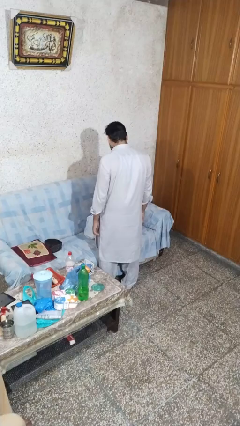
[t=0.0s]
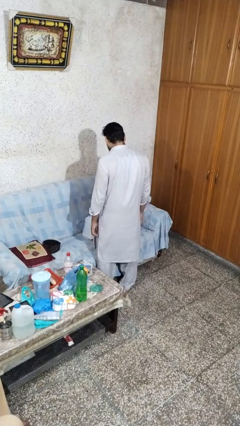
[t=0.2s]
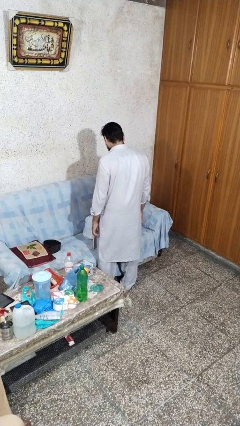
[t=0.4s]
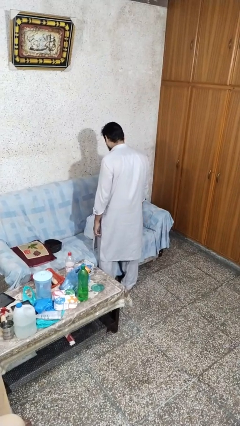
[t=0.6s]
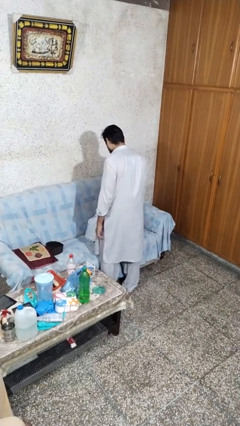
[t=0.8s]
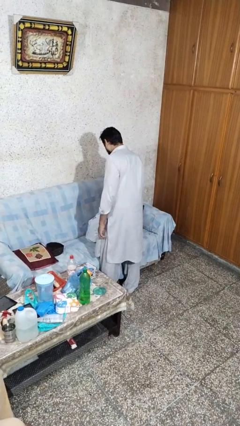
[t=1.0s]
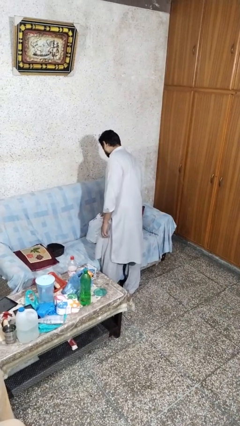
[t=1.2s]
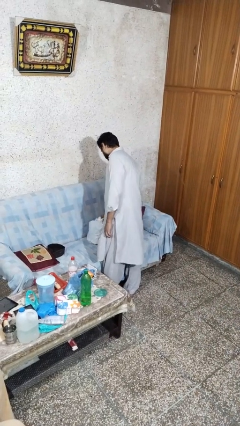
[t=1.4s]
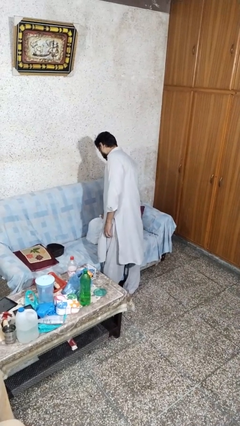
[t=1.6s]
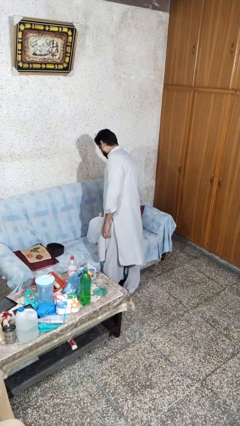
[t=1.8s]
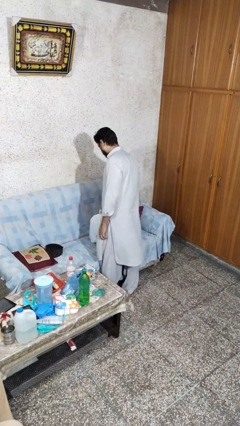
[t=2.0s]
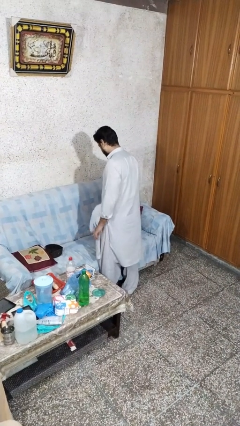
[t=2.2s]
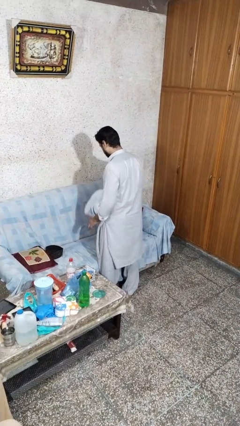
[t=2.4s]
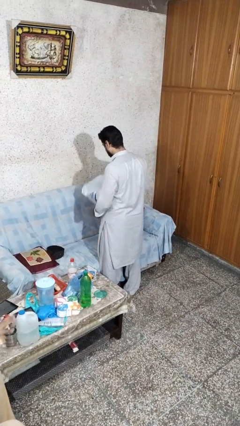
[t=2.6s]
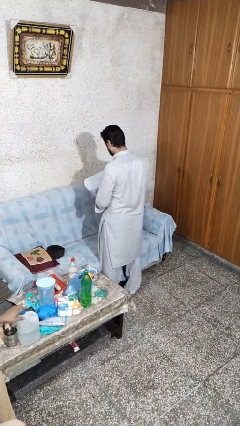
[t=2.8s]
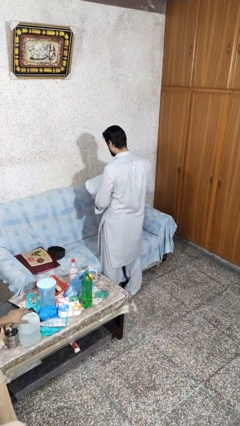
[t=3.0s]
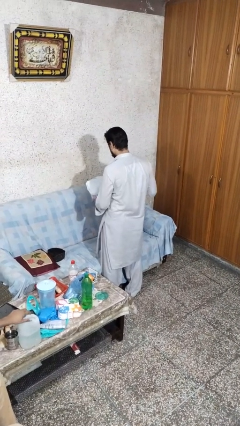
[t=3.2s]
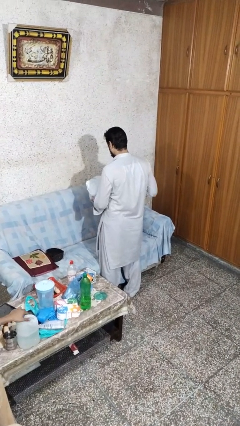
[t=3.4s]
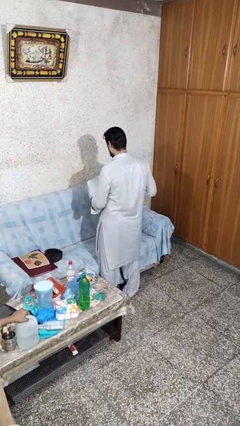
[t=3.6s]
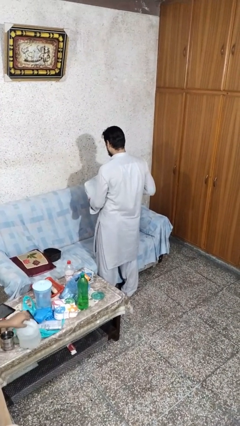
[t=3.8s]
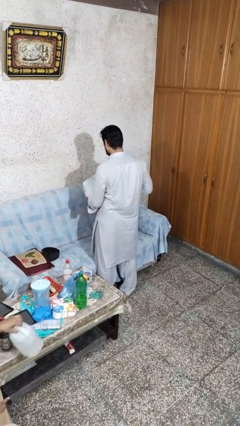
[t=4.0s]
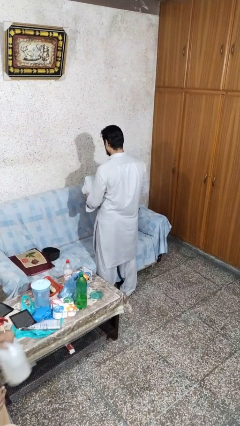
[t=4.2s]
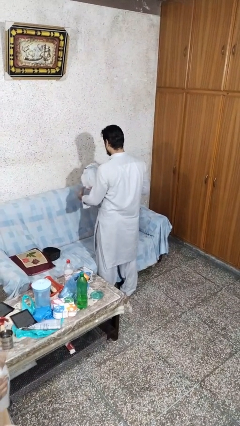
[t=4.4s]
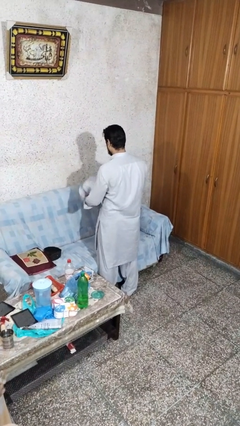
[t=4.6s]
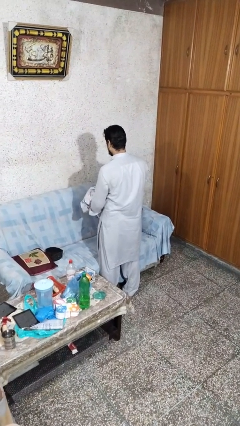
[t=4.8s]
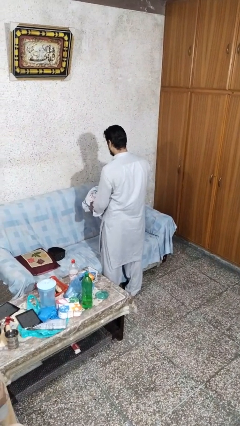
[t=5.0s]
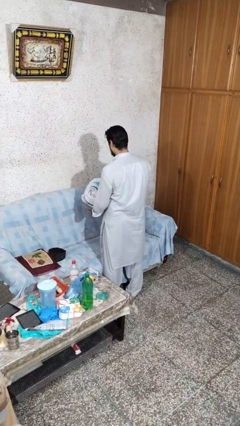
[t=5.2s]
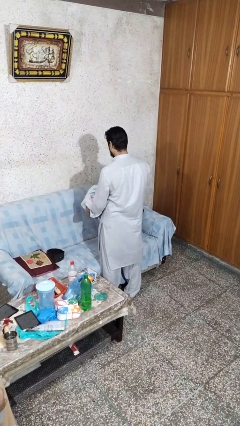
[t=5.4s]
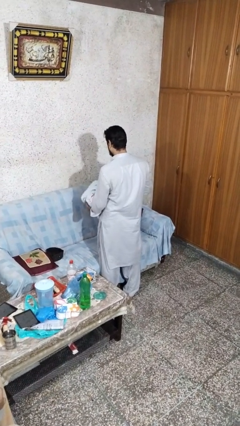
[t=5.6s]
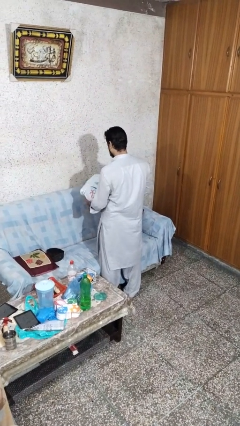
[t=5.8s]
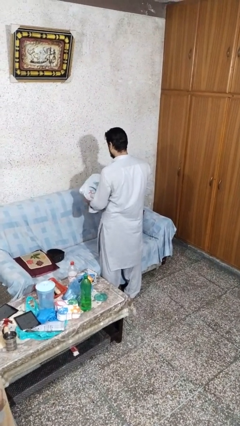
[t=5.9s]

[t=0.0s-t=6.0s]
person picks up object from couch

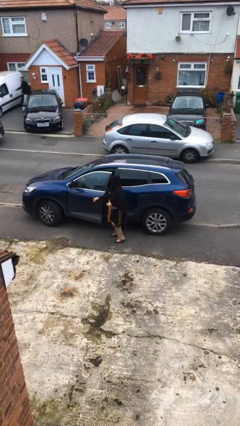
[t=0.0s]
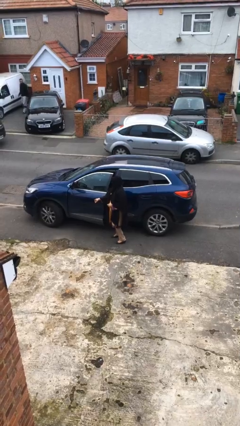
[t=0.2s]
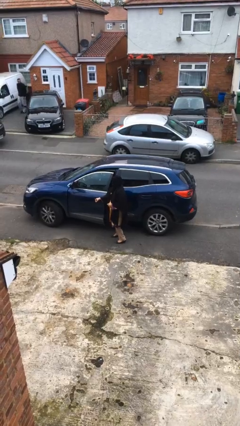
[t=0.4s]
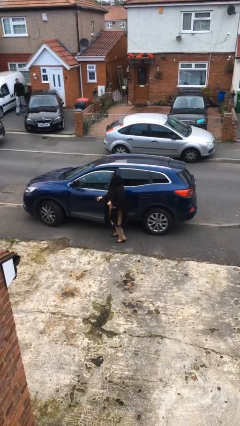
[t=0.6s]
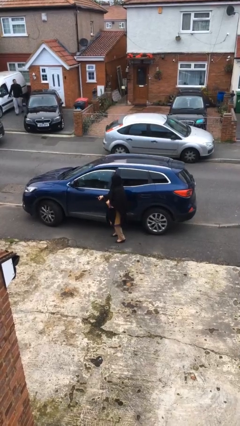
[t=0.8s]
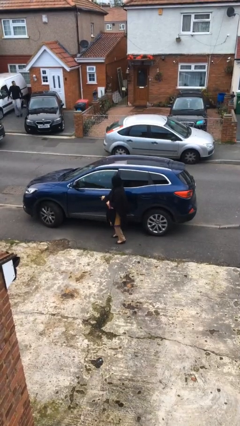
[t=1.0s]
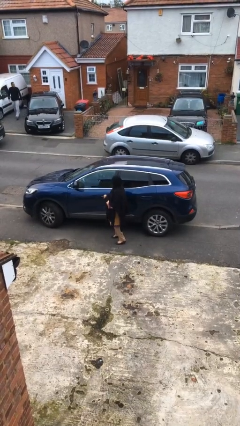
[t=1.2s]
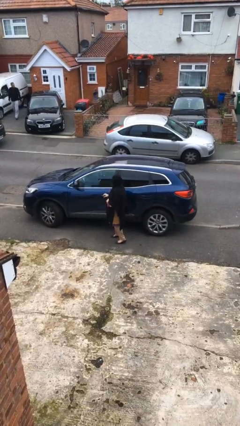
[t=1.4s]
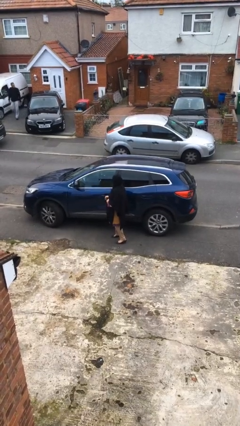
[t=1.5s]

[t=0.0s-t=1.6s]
person closes car door

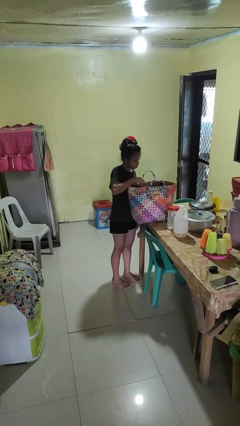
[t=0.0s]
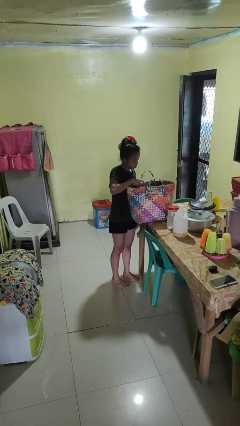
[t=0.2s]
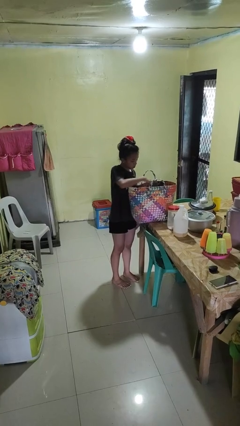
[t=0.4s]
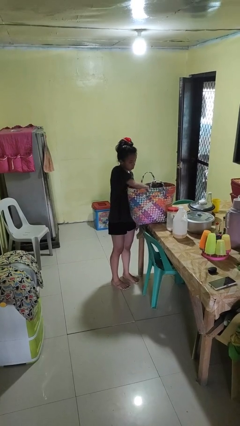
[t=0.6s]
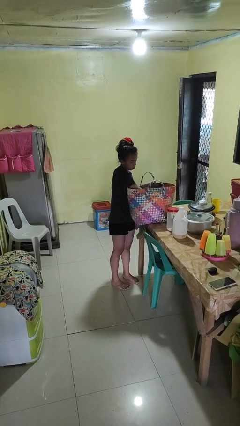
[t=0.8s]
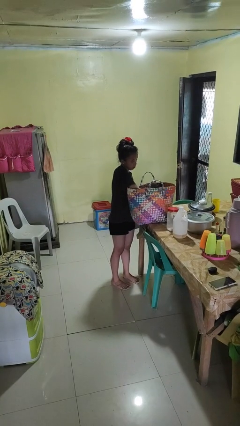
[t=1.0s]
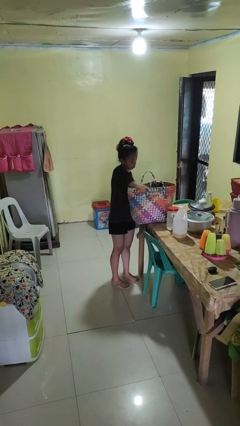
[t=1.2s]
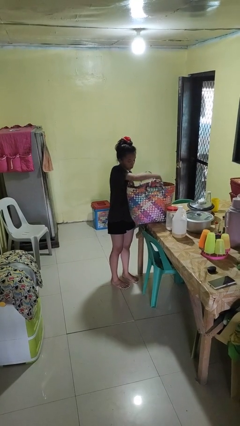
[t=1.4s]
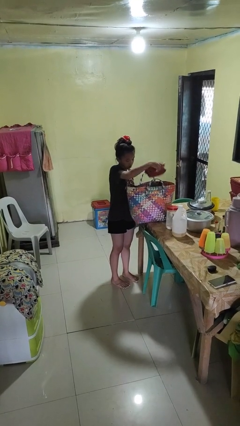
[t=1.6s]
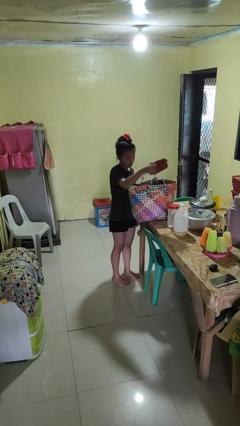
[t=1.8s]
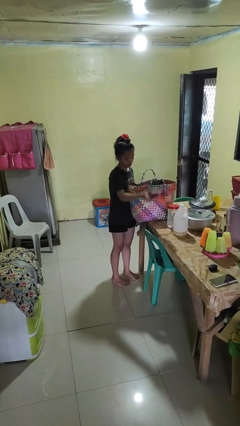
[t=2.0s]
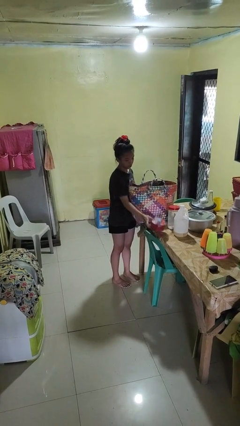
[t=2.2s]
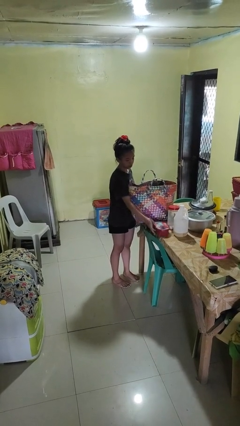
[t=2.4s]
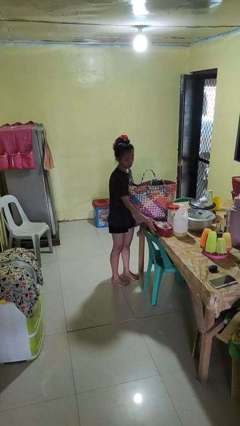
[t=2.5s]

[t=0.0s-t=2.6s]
person takes object from basket

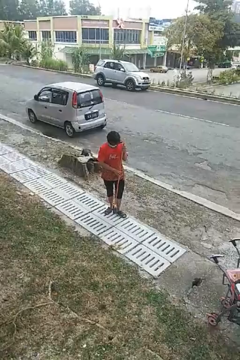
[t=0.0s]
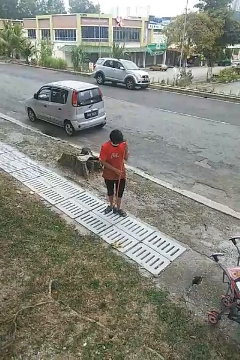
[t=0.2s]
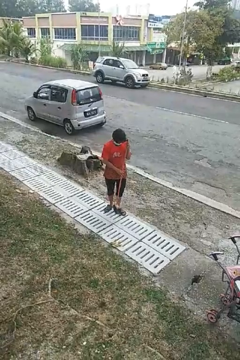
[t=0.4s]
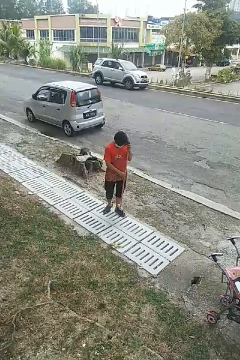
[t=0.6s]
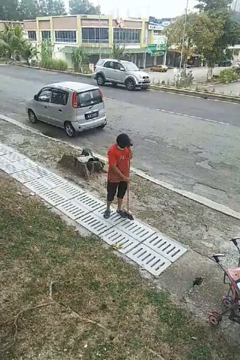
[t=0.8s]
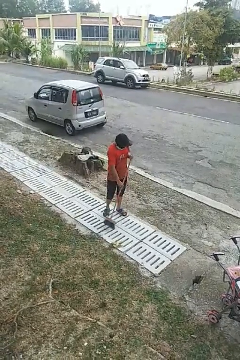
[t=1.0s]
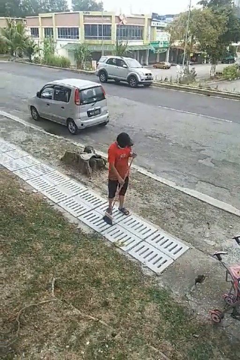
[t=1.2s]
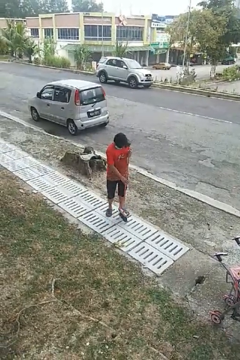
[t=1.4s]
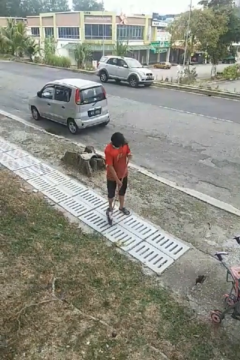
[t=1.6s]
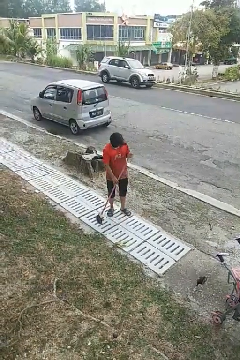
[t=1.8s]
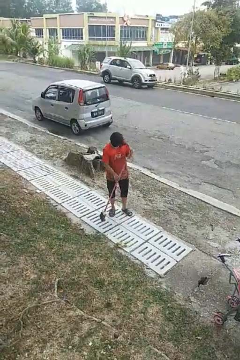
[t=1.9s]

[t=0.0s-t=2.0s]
person sweeps floor

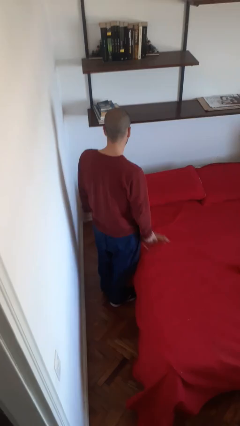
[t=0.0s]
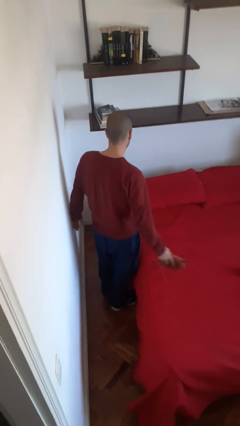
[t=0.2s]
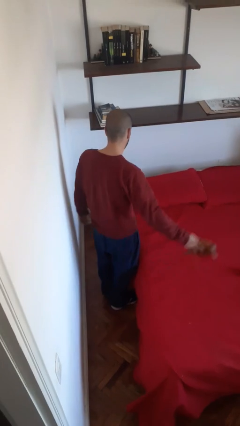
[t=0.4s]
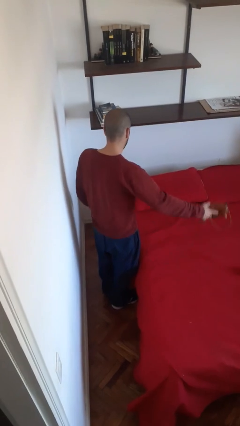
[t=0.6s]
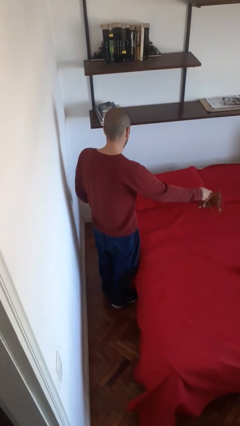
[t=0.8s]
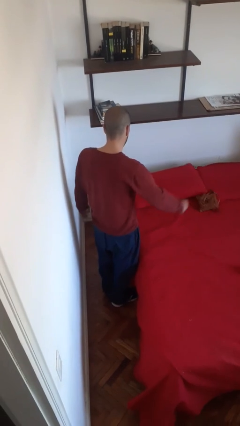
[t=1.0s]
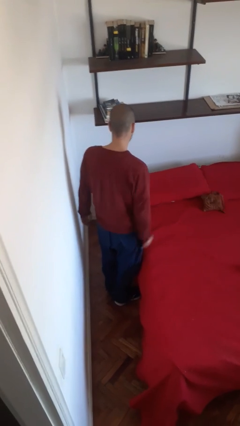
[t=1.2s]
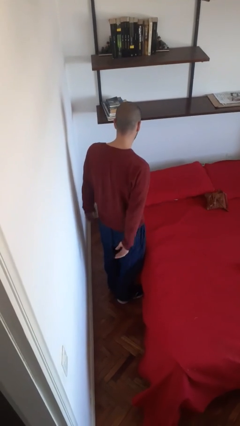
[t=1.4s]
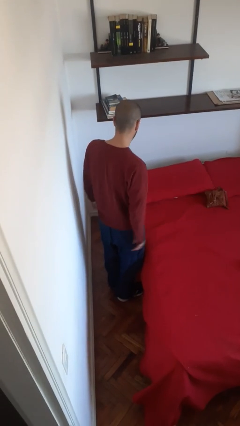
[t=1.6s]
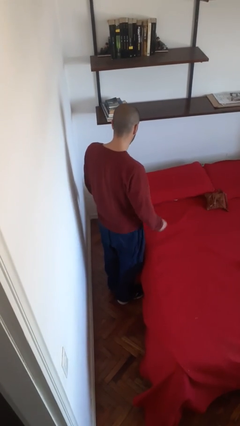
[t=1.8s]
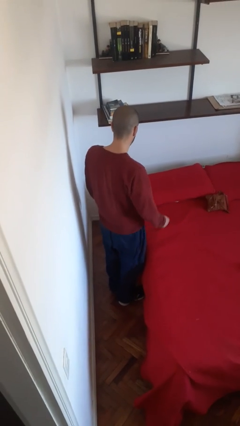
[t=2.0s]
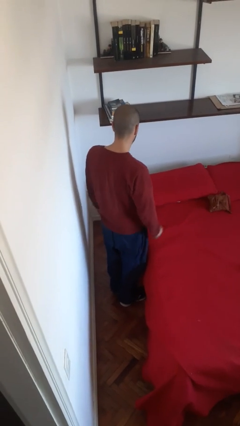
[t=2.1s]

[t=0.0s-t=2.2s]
person throws object on bed

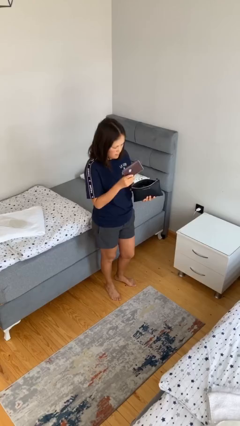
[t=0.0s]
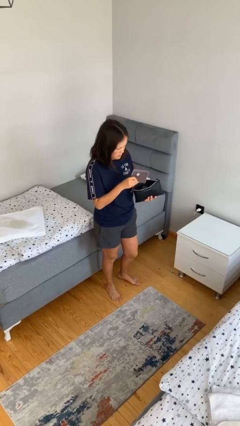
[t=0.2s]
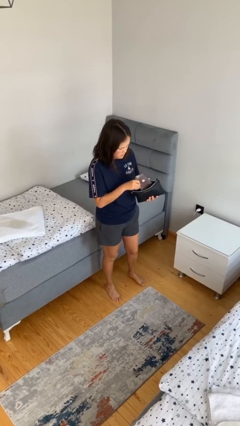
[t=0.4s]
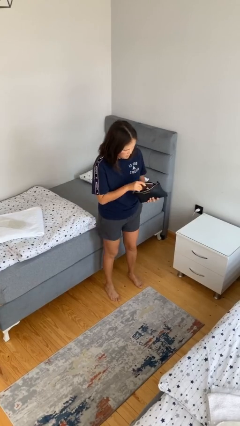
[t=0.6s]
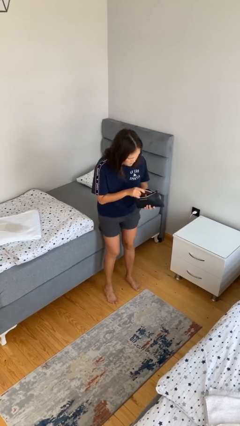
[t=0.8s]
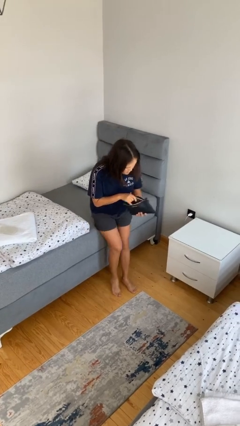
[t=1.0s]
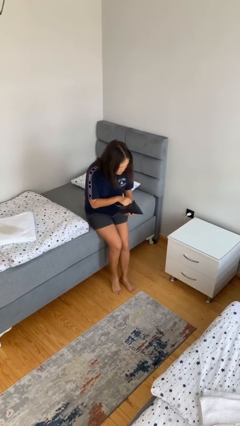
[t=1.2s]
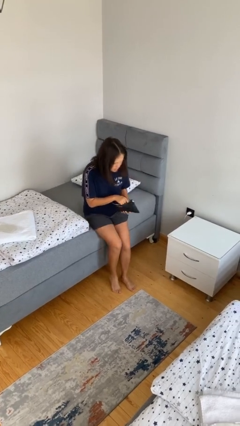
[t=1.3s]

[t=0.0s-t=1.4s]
person puts object into purse

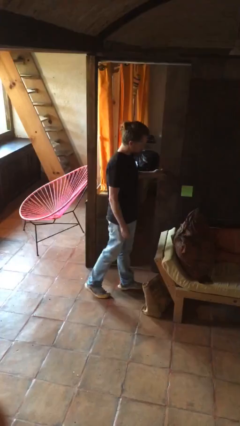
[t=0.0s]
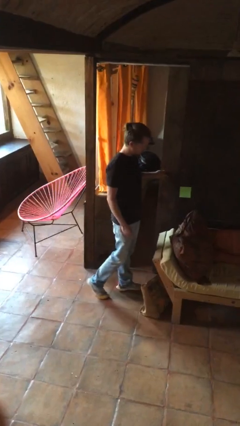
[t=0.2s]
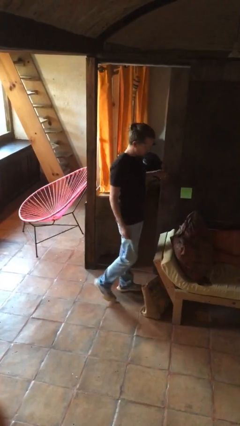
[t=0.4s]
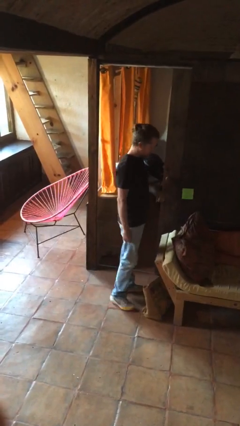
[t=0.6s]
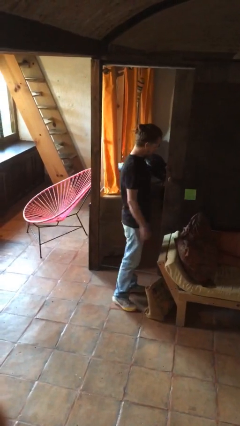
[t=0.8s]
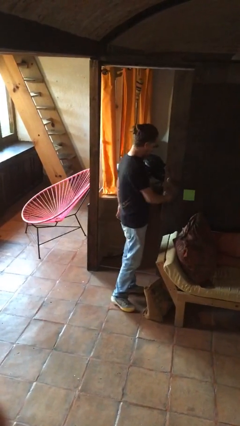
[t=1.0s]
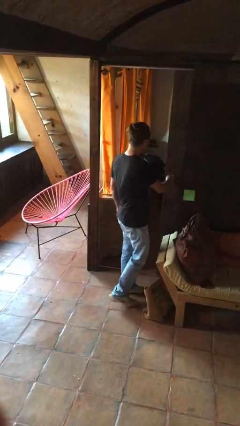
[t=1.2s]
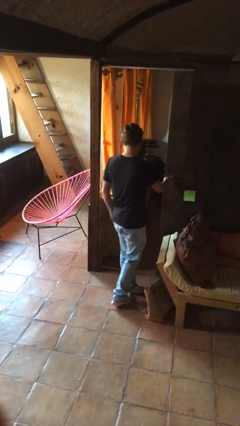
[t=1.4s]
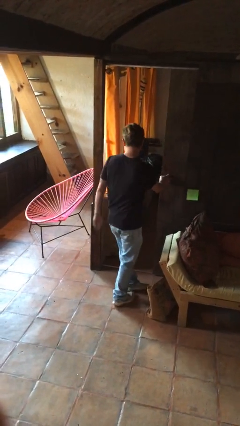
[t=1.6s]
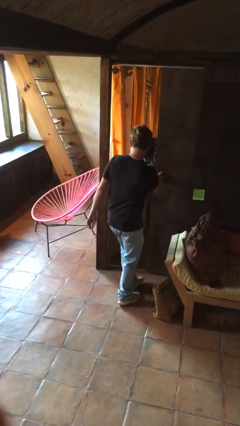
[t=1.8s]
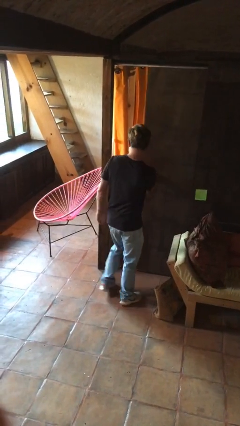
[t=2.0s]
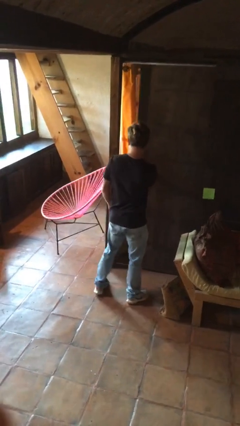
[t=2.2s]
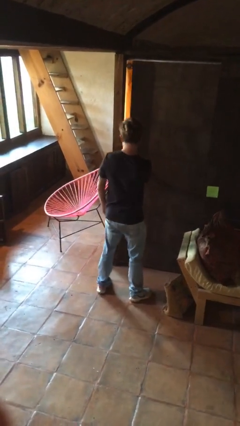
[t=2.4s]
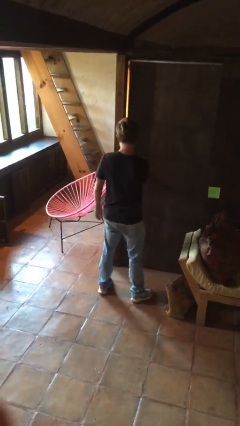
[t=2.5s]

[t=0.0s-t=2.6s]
person closes facility door
